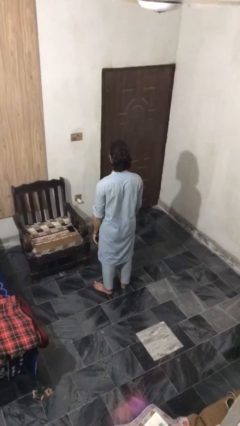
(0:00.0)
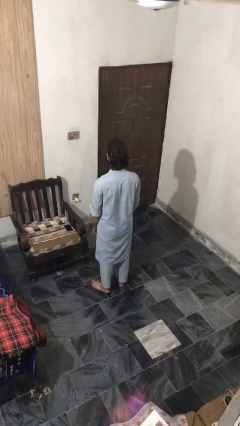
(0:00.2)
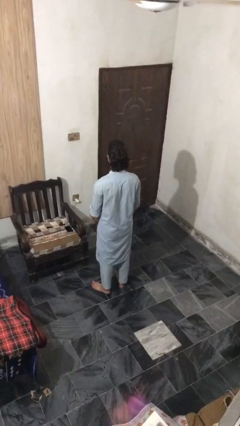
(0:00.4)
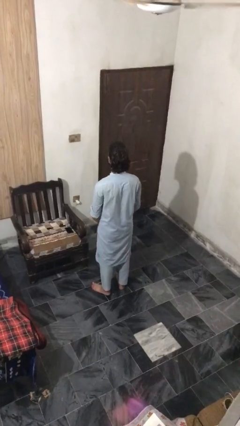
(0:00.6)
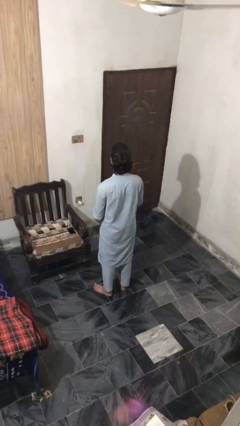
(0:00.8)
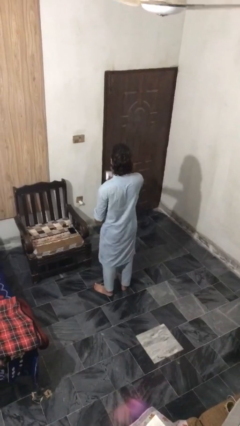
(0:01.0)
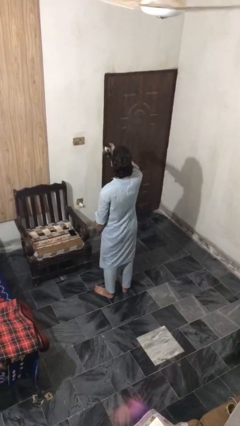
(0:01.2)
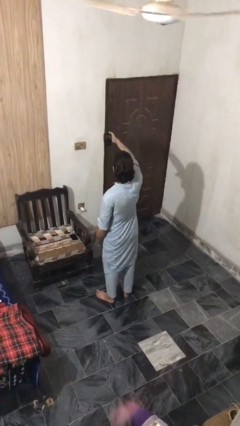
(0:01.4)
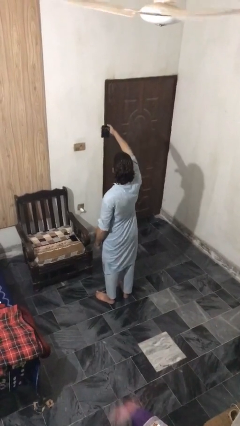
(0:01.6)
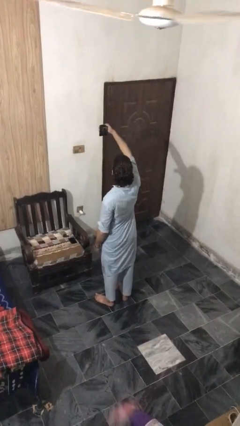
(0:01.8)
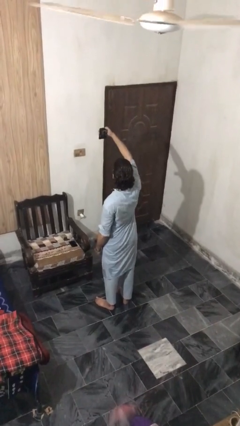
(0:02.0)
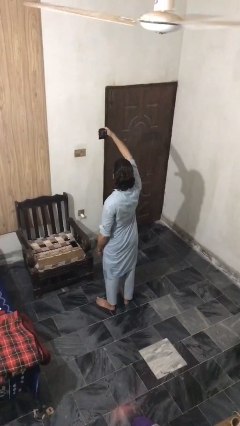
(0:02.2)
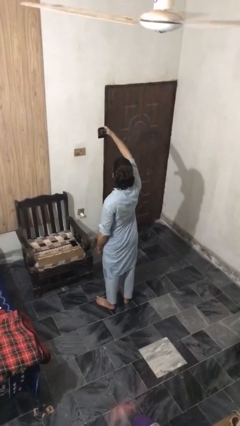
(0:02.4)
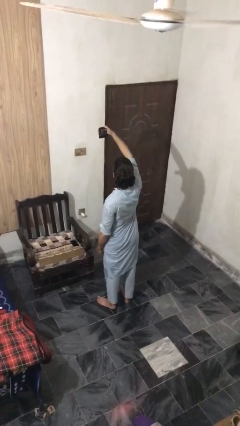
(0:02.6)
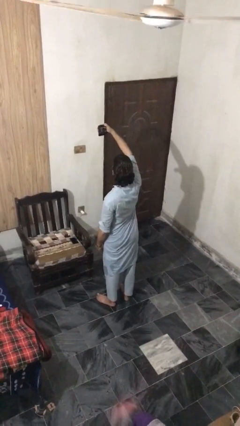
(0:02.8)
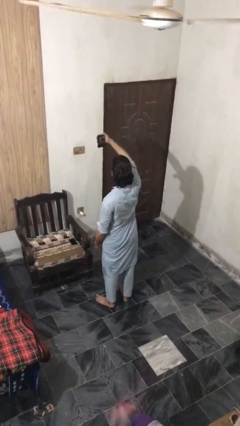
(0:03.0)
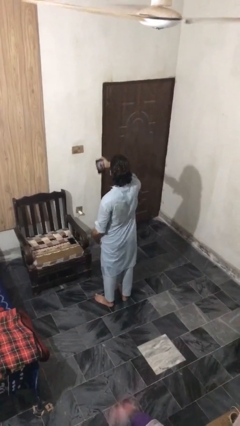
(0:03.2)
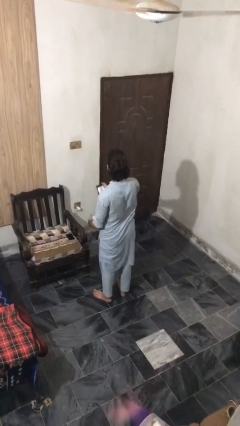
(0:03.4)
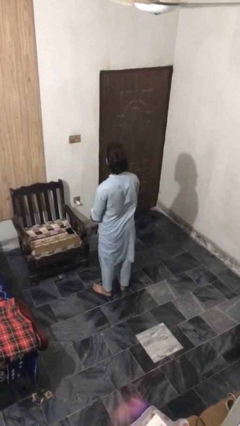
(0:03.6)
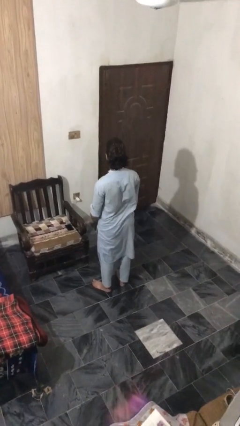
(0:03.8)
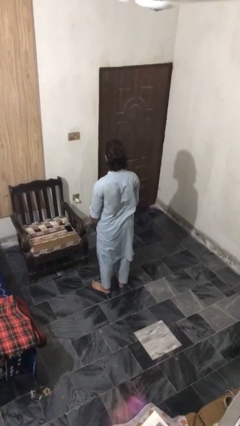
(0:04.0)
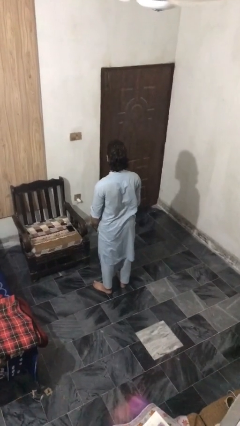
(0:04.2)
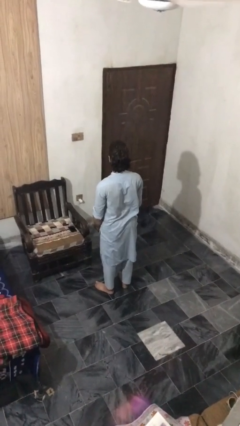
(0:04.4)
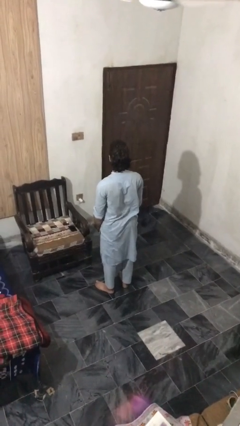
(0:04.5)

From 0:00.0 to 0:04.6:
person takes selfie

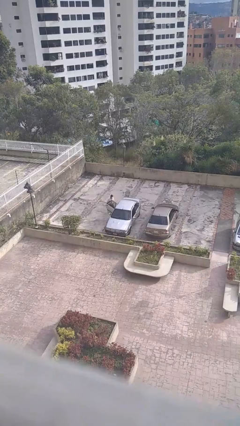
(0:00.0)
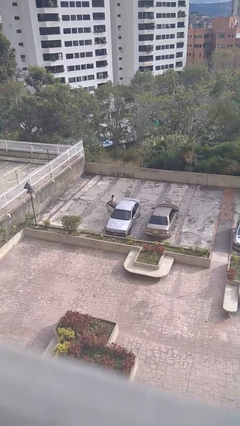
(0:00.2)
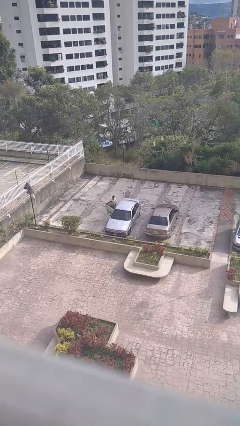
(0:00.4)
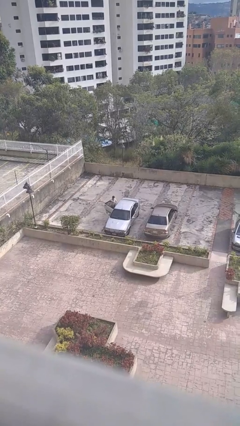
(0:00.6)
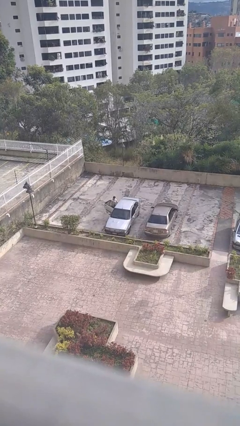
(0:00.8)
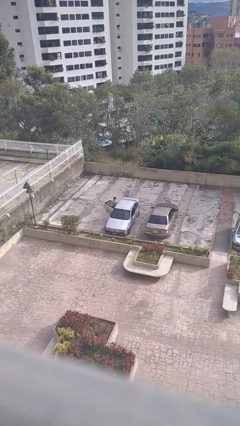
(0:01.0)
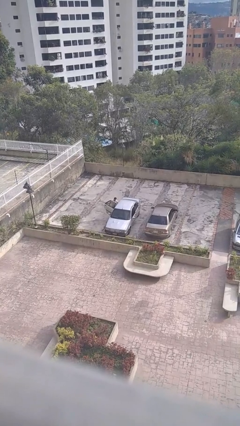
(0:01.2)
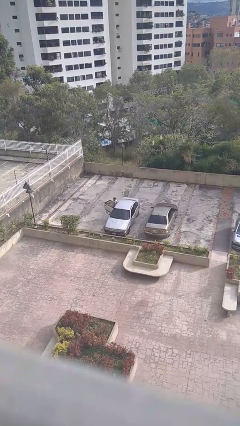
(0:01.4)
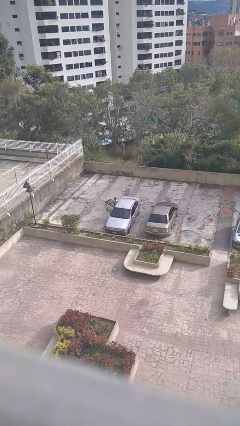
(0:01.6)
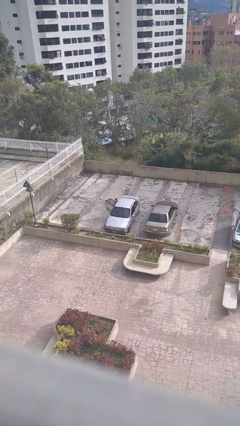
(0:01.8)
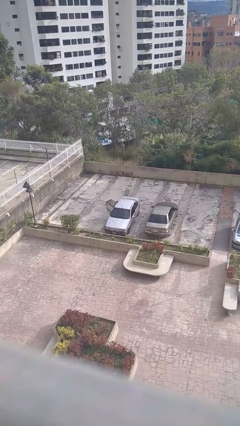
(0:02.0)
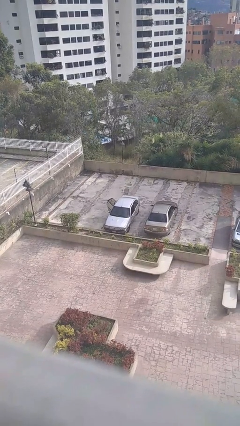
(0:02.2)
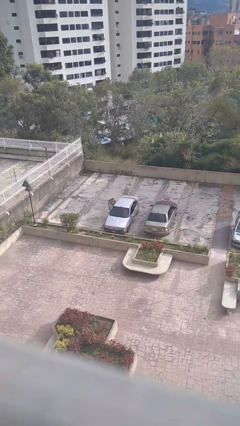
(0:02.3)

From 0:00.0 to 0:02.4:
car picks up person

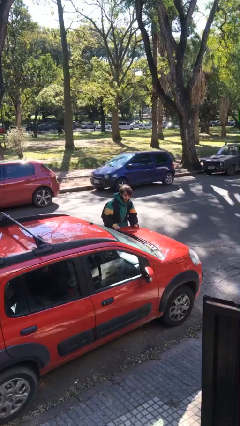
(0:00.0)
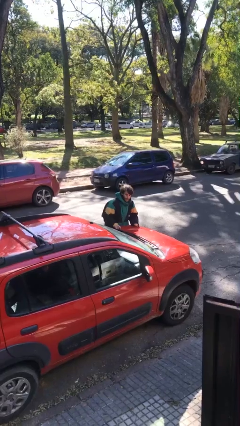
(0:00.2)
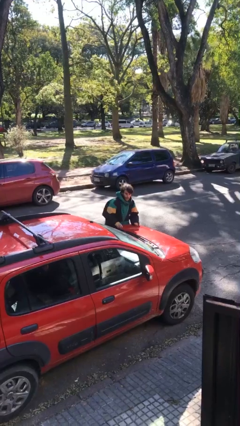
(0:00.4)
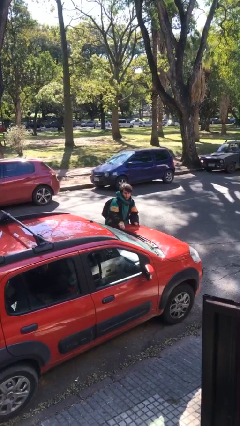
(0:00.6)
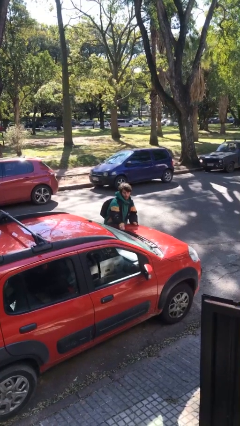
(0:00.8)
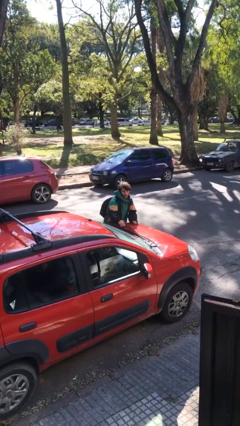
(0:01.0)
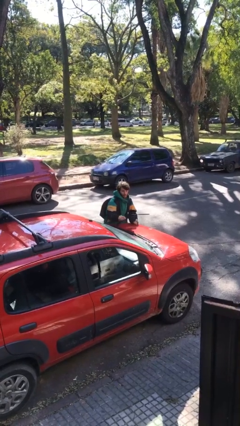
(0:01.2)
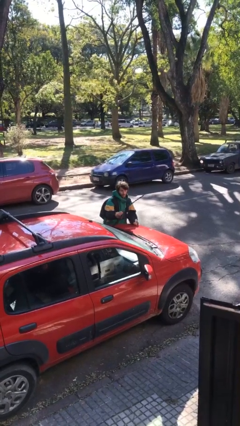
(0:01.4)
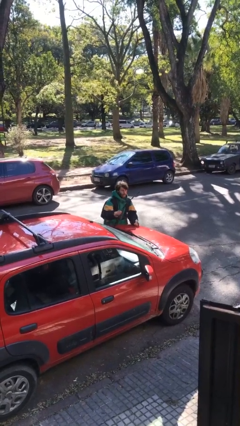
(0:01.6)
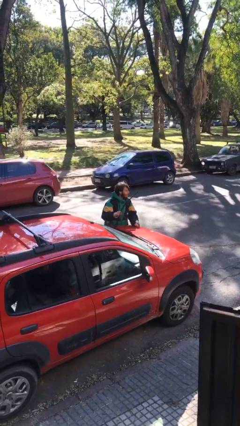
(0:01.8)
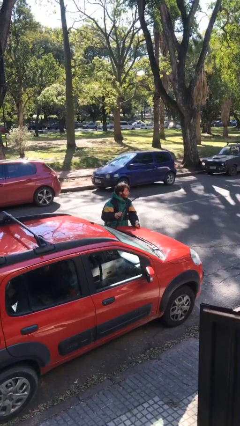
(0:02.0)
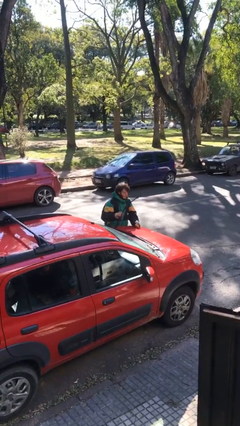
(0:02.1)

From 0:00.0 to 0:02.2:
person flips up car wipers

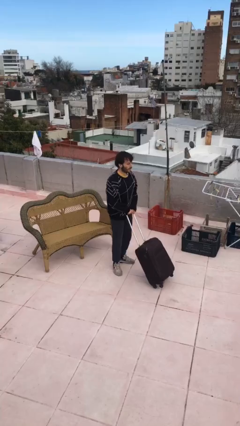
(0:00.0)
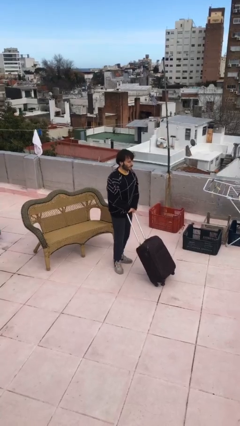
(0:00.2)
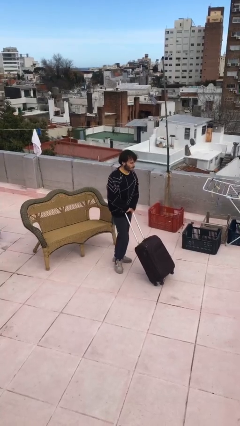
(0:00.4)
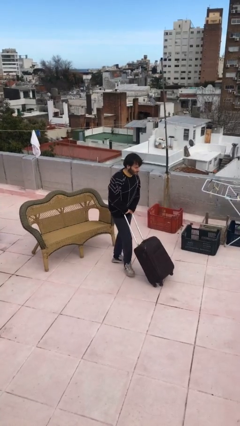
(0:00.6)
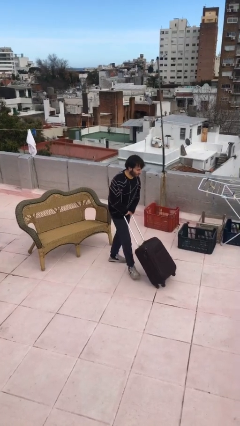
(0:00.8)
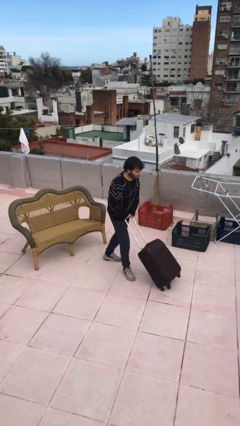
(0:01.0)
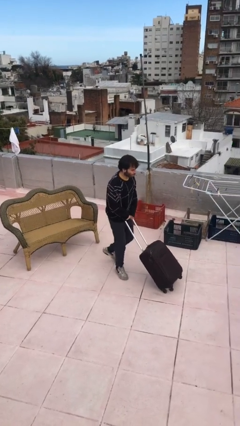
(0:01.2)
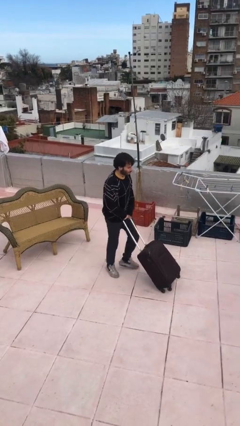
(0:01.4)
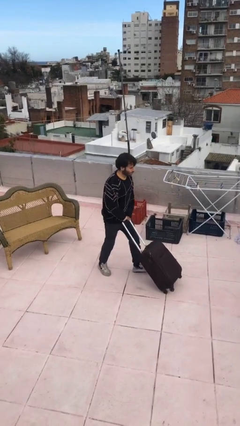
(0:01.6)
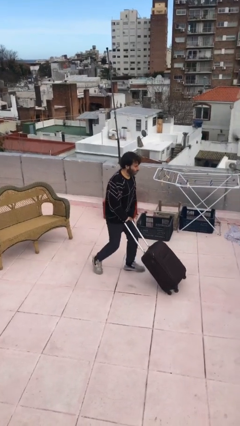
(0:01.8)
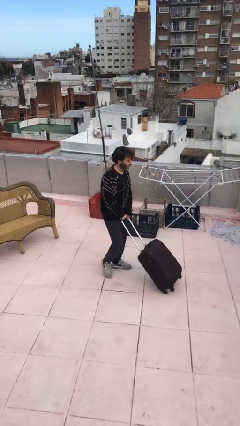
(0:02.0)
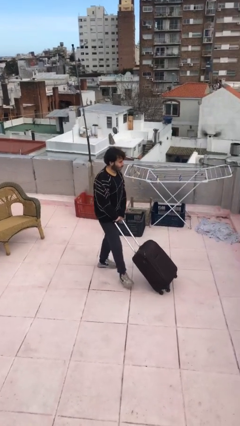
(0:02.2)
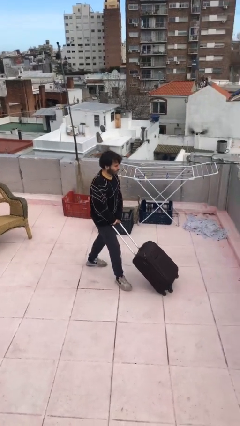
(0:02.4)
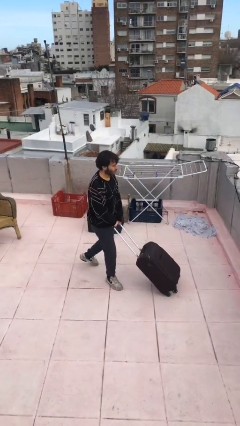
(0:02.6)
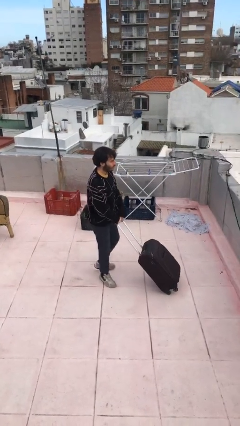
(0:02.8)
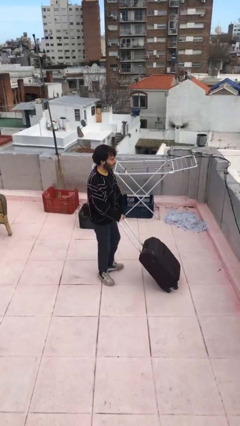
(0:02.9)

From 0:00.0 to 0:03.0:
person pushes wheeled cart

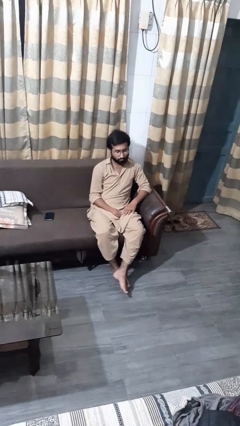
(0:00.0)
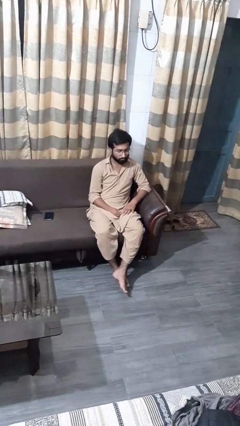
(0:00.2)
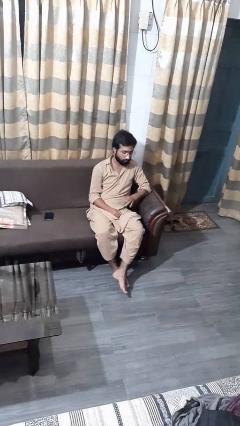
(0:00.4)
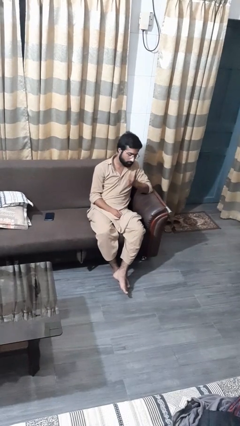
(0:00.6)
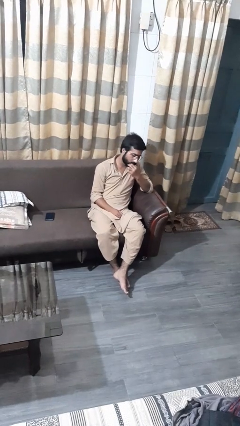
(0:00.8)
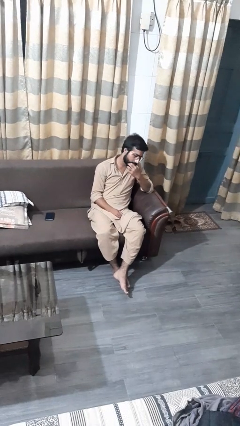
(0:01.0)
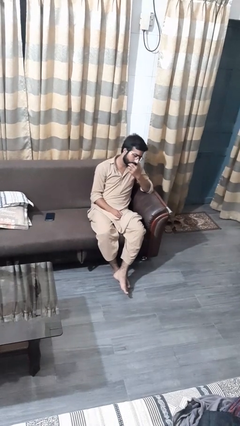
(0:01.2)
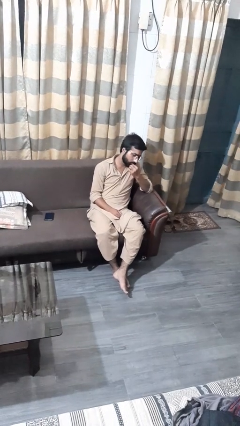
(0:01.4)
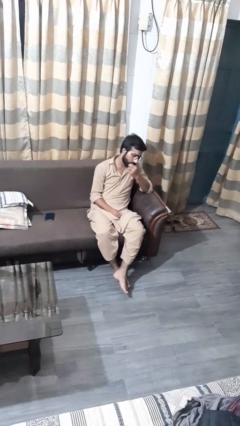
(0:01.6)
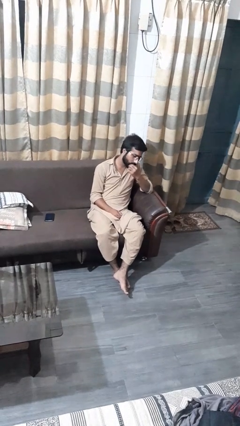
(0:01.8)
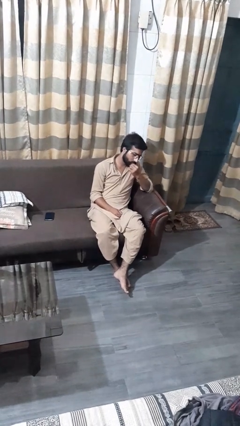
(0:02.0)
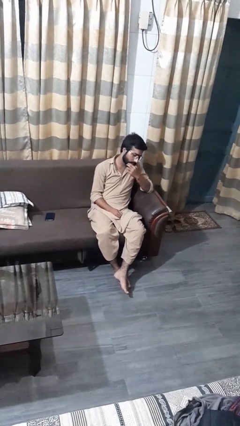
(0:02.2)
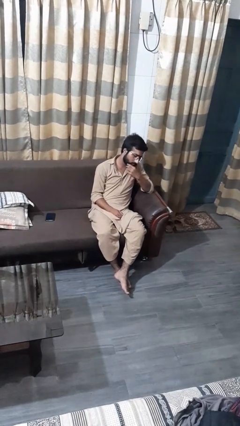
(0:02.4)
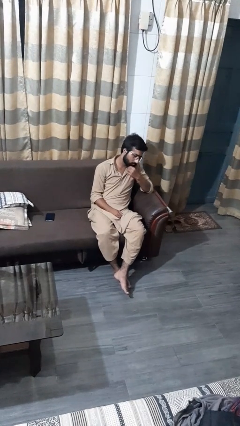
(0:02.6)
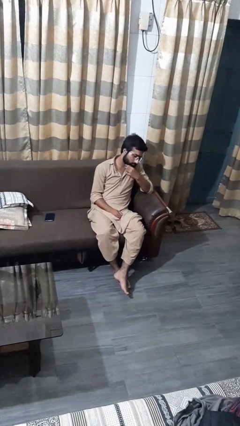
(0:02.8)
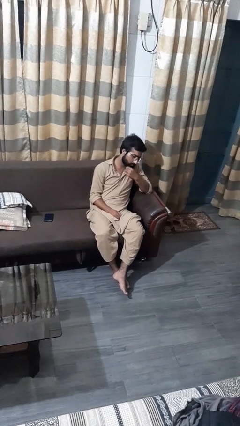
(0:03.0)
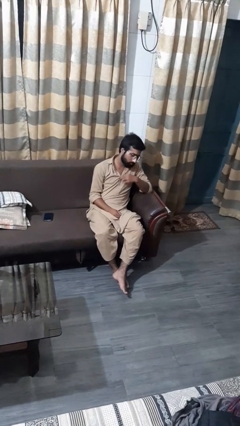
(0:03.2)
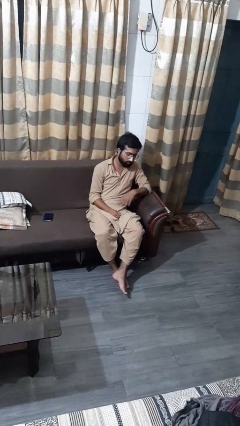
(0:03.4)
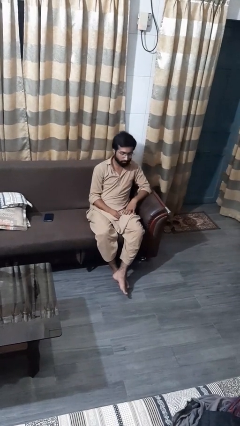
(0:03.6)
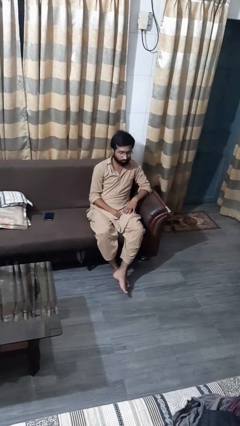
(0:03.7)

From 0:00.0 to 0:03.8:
person strokes chin

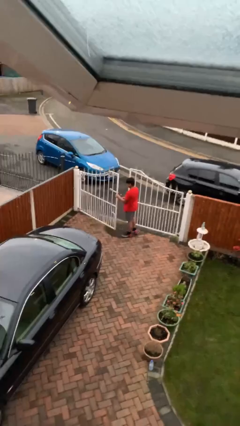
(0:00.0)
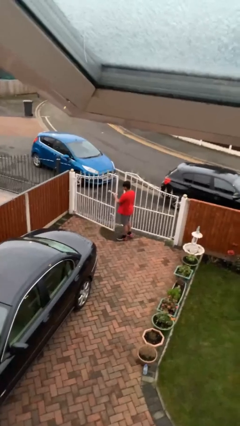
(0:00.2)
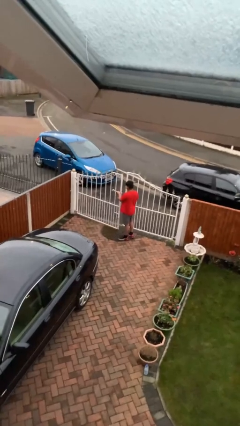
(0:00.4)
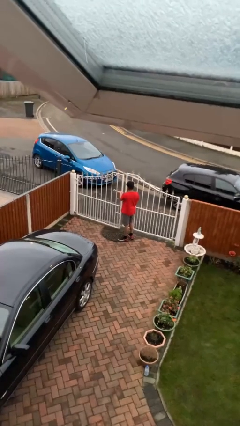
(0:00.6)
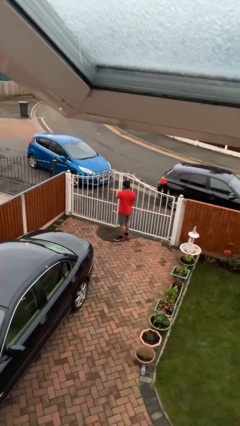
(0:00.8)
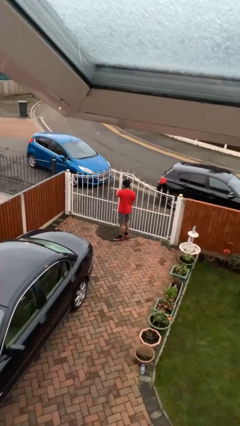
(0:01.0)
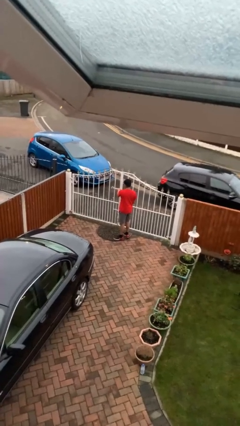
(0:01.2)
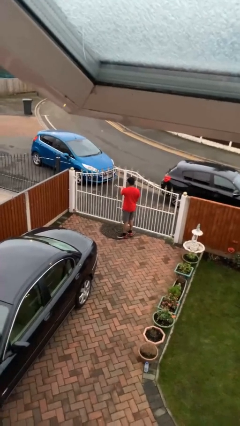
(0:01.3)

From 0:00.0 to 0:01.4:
person closes facility door
